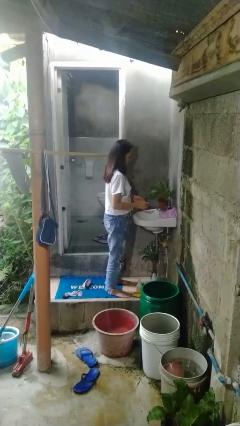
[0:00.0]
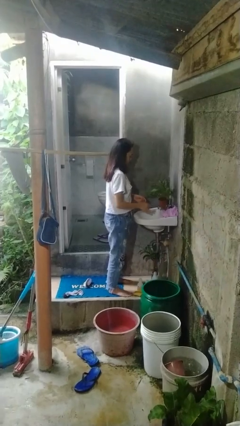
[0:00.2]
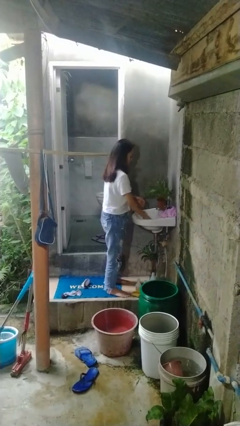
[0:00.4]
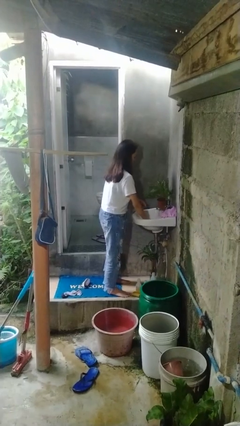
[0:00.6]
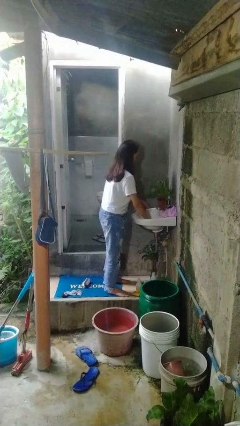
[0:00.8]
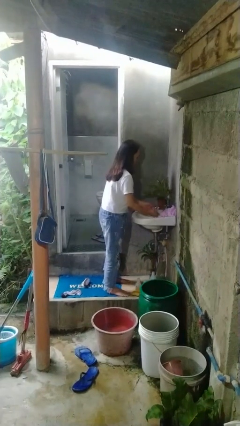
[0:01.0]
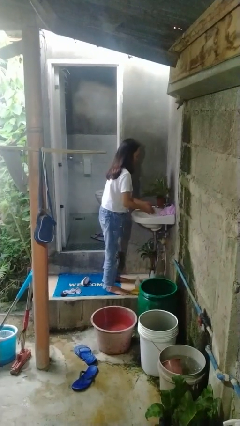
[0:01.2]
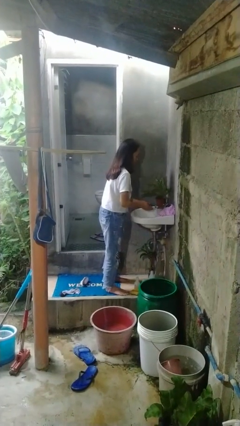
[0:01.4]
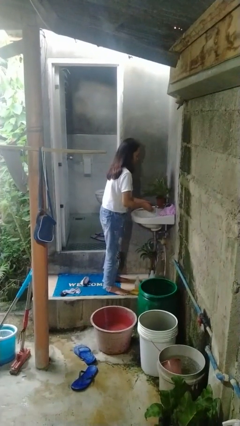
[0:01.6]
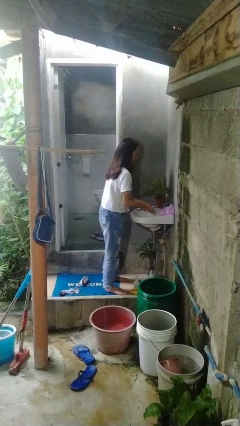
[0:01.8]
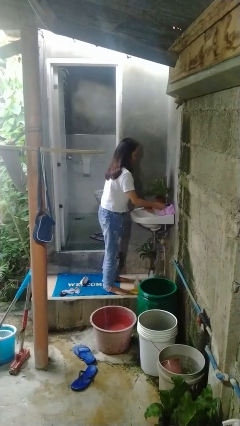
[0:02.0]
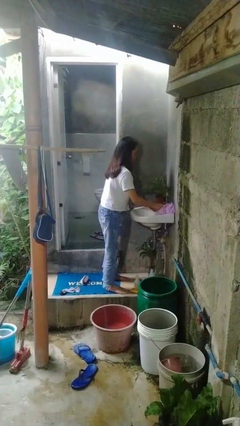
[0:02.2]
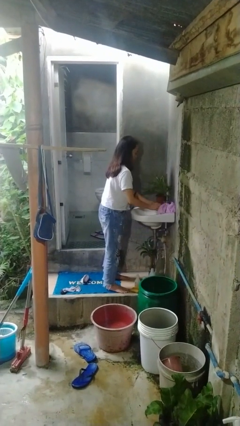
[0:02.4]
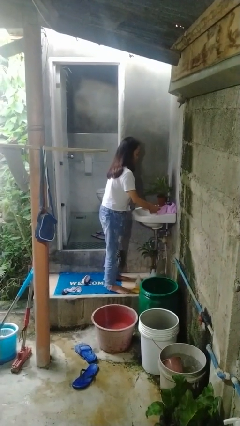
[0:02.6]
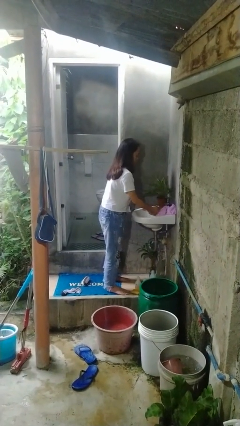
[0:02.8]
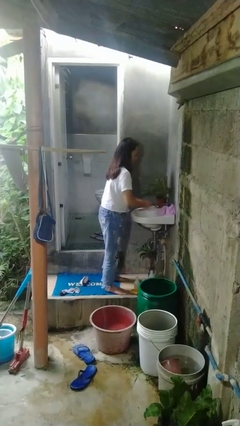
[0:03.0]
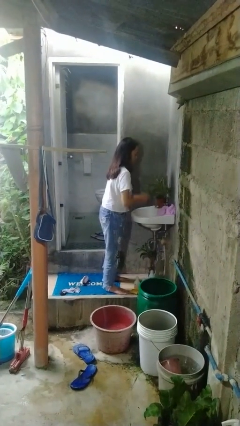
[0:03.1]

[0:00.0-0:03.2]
person washes hands

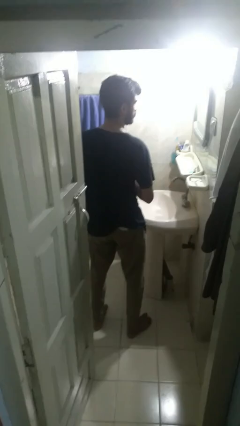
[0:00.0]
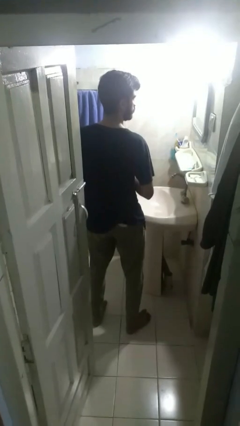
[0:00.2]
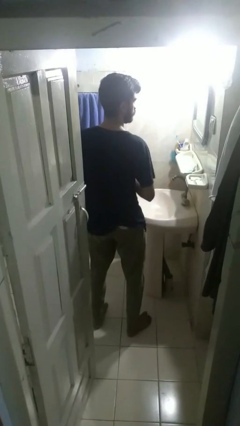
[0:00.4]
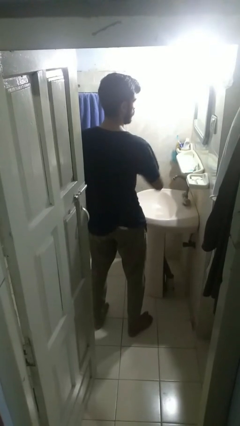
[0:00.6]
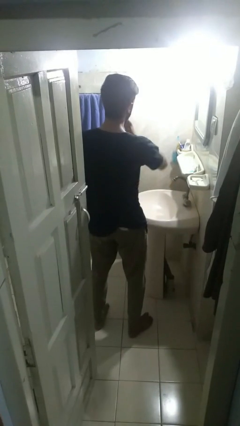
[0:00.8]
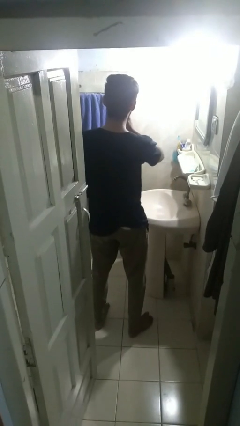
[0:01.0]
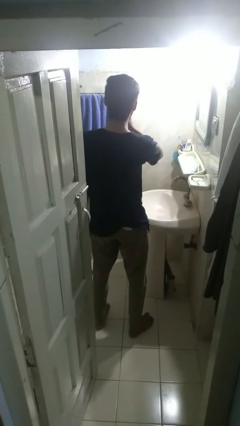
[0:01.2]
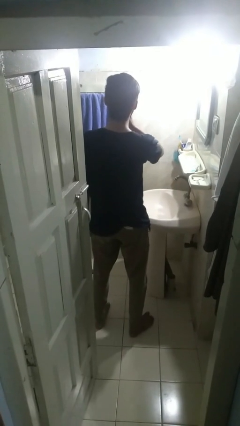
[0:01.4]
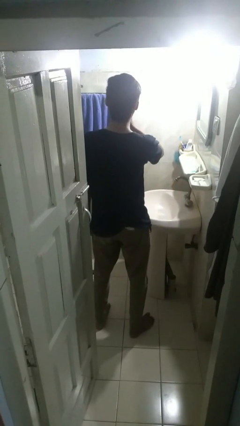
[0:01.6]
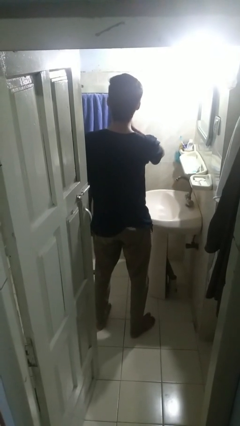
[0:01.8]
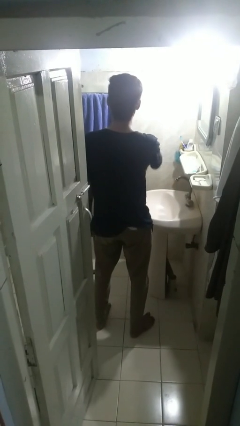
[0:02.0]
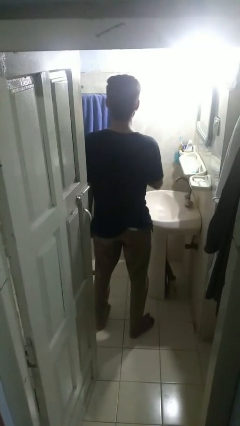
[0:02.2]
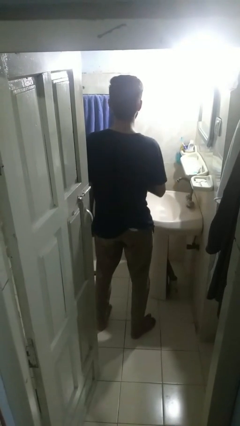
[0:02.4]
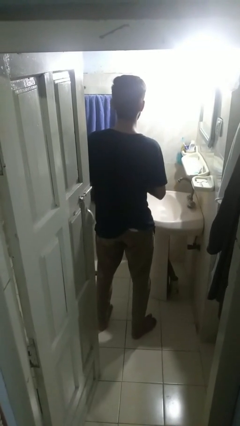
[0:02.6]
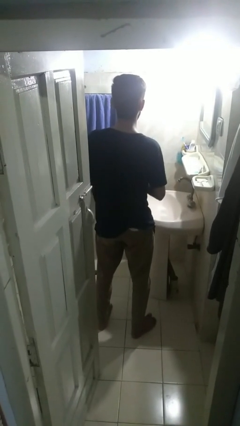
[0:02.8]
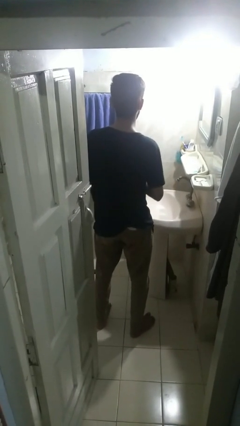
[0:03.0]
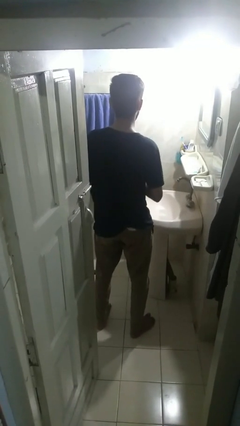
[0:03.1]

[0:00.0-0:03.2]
person flosses

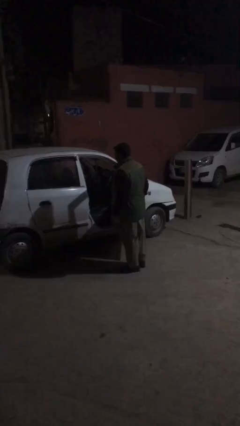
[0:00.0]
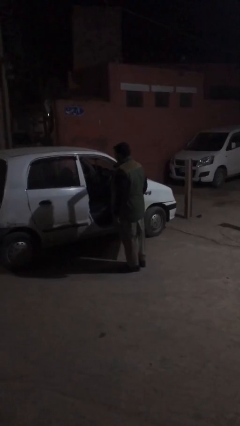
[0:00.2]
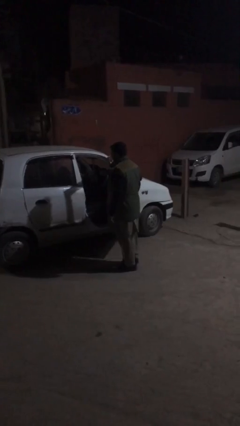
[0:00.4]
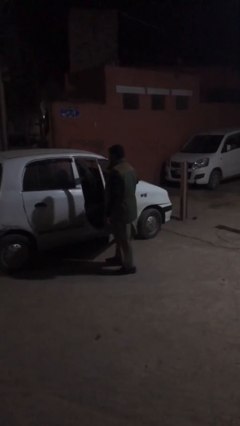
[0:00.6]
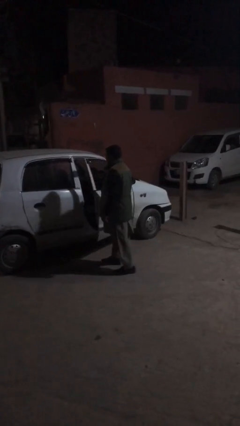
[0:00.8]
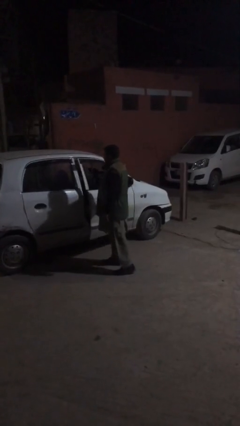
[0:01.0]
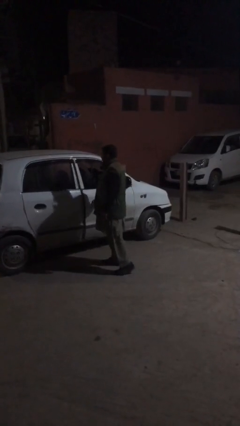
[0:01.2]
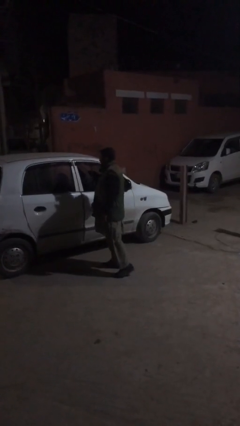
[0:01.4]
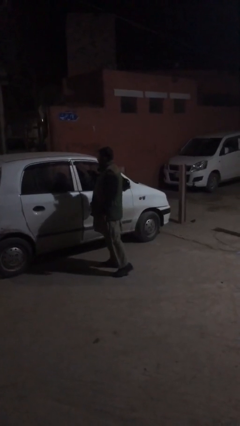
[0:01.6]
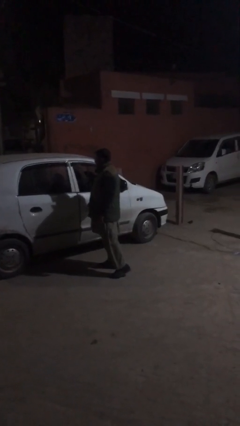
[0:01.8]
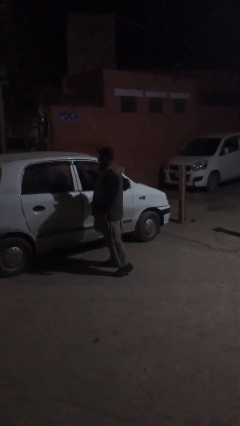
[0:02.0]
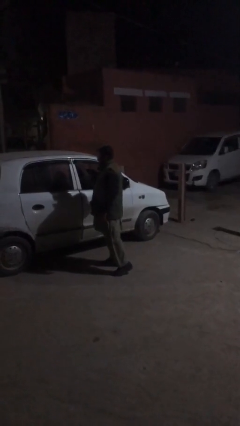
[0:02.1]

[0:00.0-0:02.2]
person closes car door

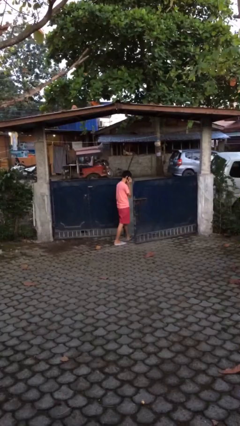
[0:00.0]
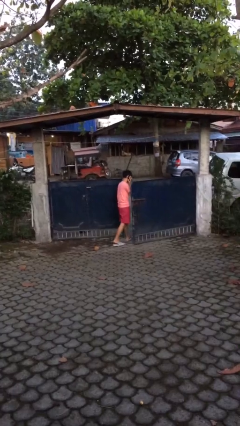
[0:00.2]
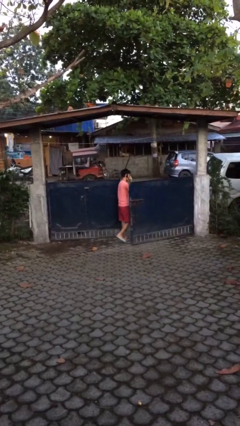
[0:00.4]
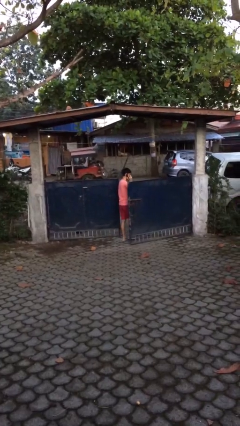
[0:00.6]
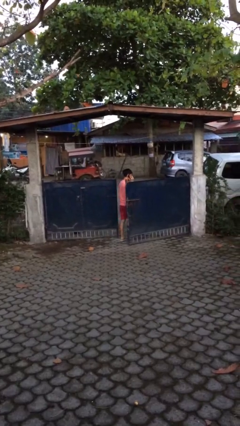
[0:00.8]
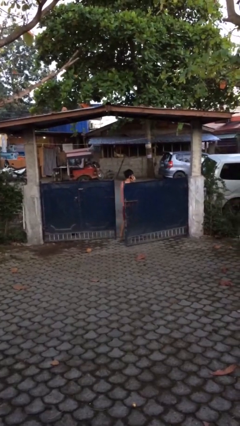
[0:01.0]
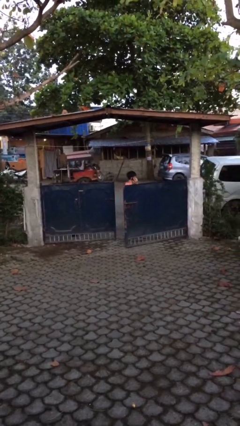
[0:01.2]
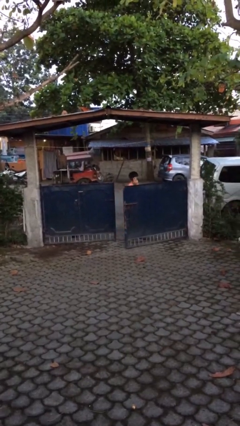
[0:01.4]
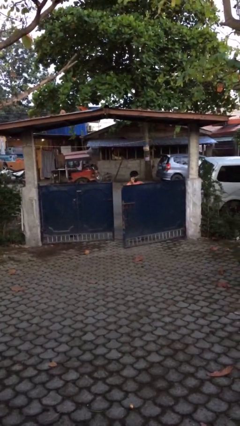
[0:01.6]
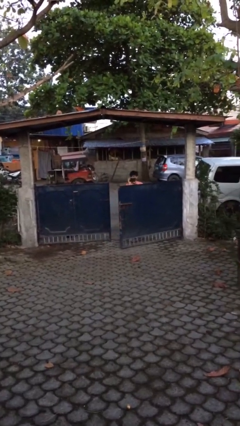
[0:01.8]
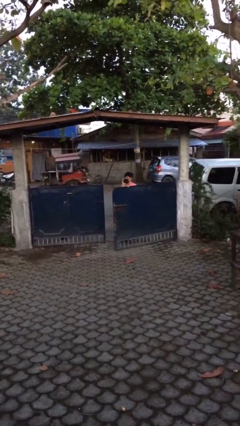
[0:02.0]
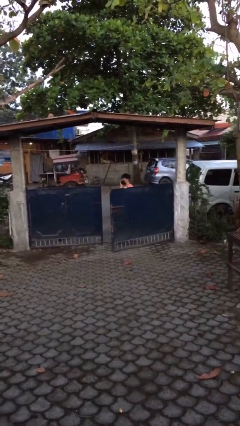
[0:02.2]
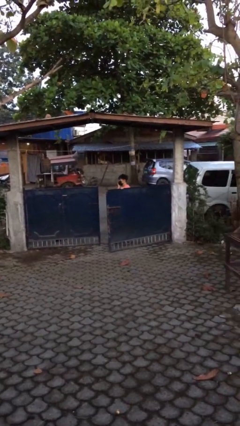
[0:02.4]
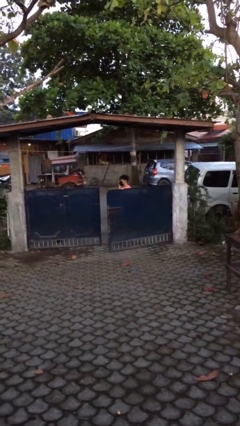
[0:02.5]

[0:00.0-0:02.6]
person exits scene through structure

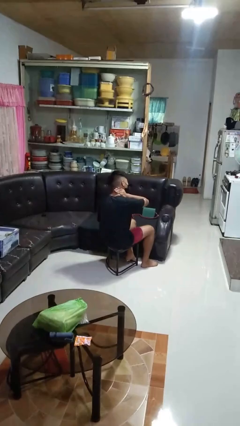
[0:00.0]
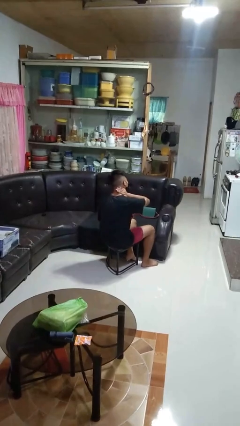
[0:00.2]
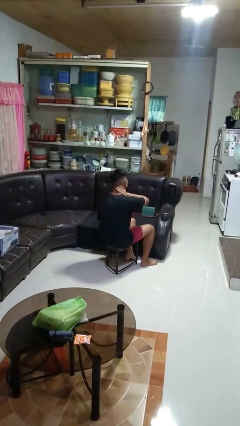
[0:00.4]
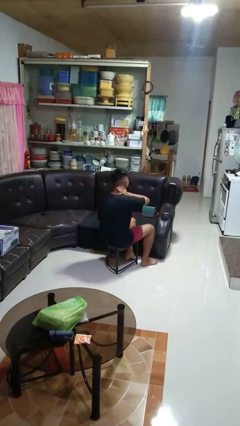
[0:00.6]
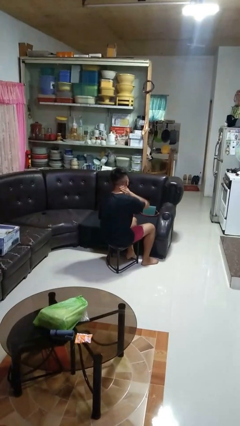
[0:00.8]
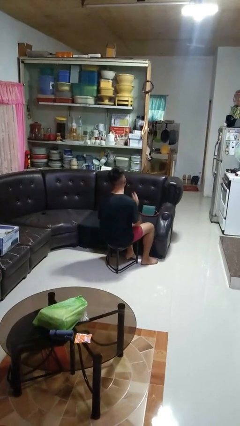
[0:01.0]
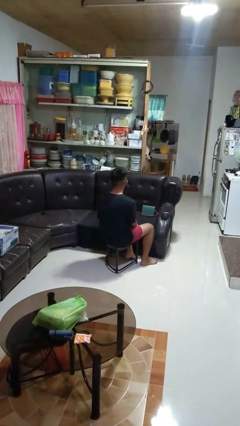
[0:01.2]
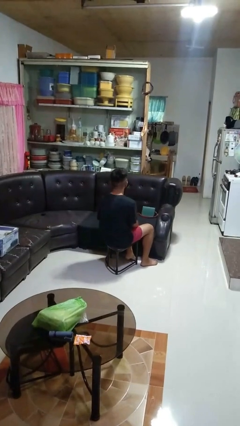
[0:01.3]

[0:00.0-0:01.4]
person swats bug

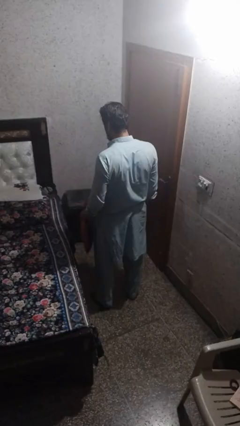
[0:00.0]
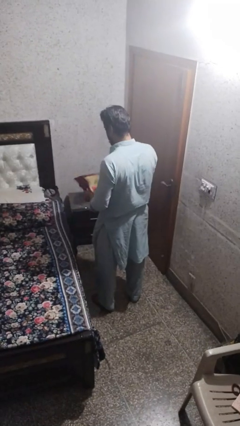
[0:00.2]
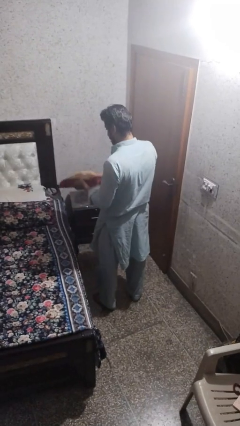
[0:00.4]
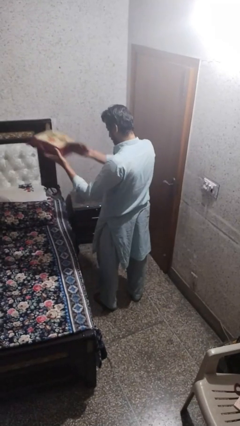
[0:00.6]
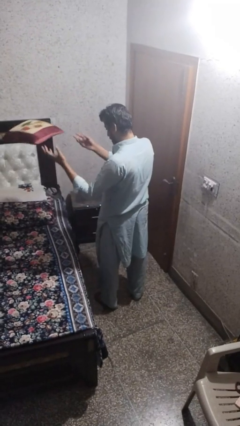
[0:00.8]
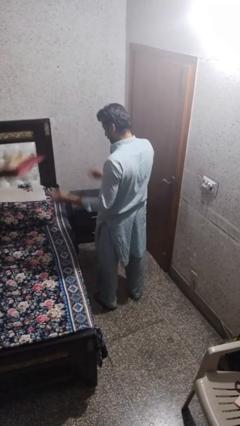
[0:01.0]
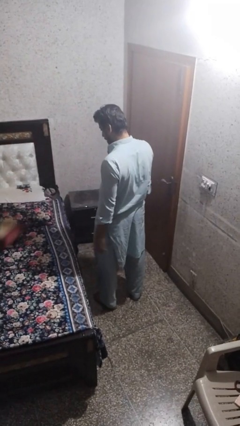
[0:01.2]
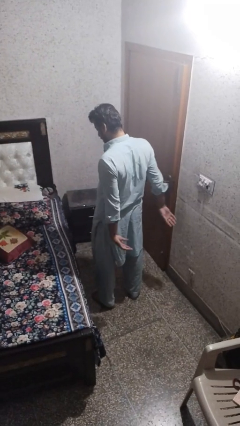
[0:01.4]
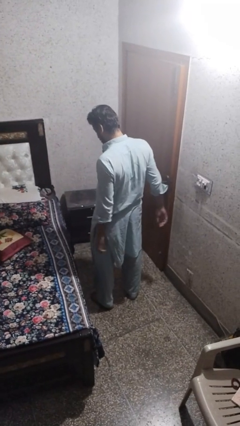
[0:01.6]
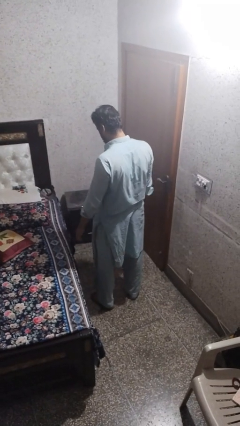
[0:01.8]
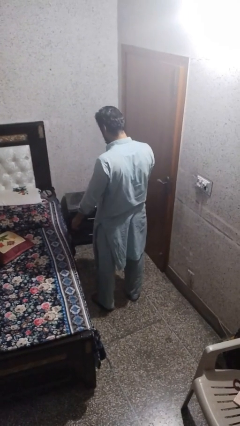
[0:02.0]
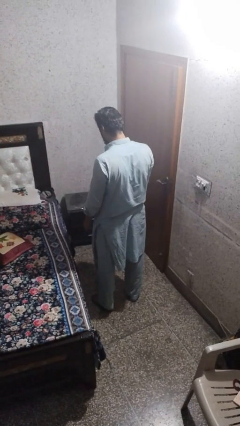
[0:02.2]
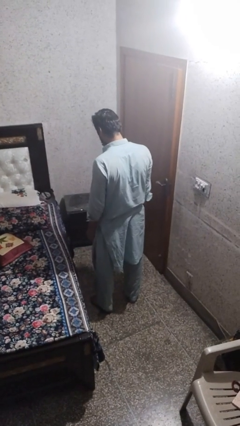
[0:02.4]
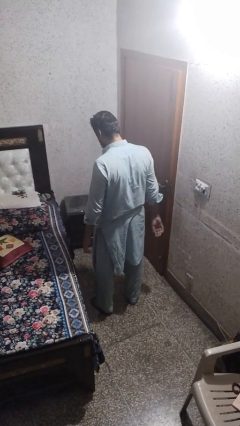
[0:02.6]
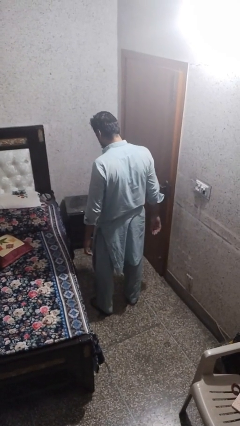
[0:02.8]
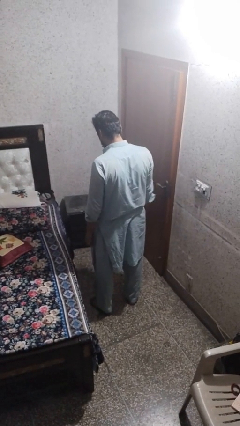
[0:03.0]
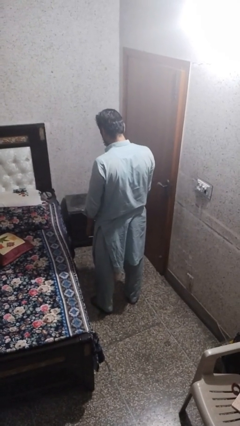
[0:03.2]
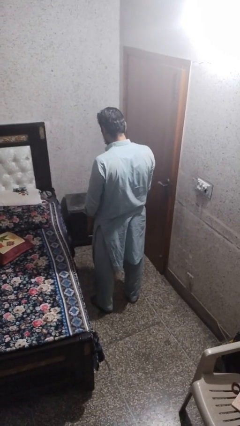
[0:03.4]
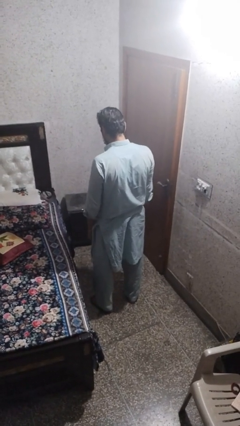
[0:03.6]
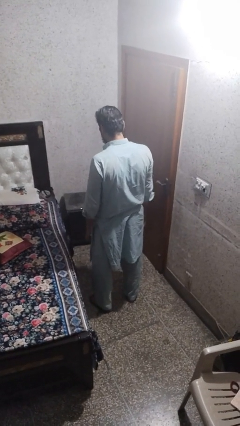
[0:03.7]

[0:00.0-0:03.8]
person throws object on bed

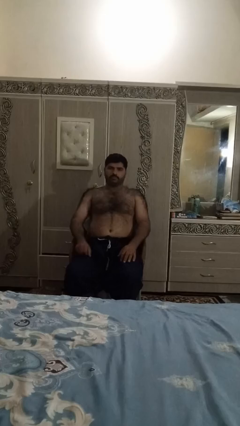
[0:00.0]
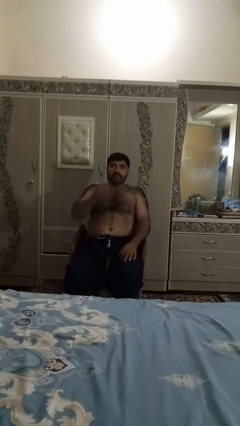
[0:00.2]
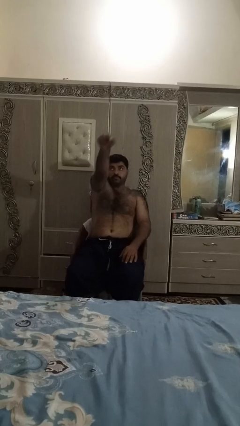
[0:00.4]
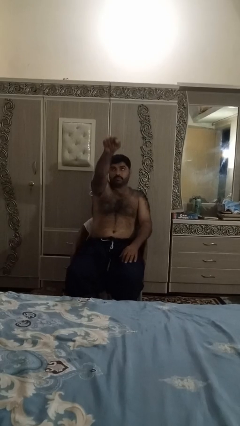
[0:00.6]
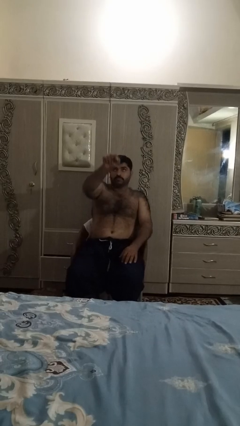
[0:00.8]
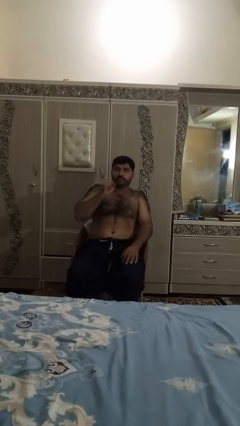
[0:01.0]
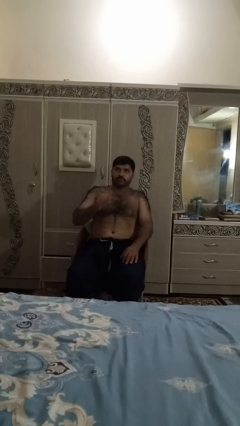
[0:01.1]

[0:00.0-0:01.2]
person punches
